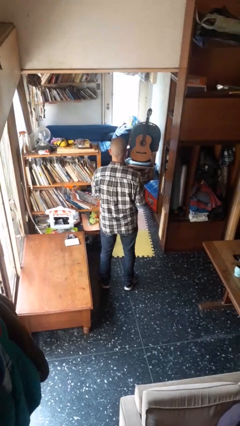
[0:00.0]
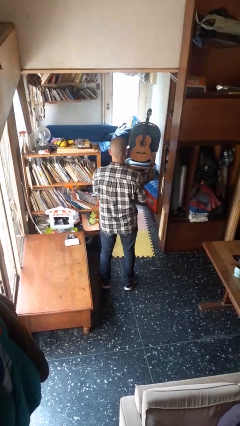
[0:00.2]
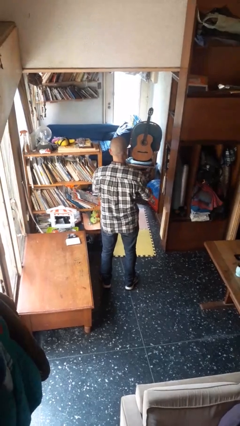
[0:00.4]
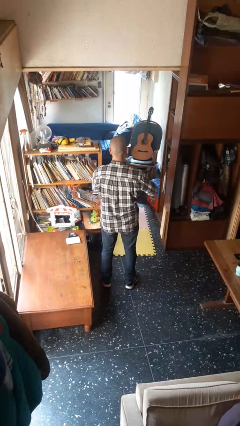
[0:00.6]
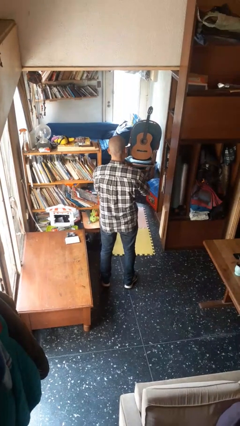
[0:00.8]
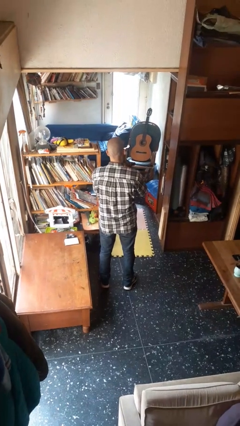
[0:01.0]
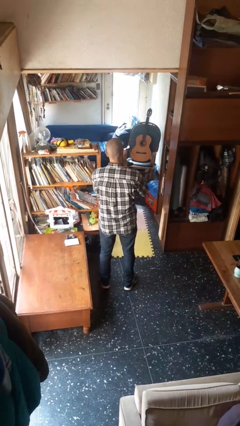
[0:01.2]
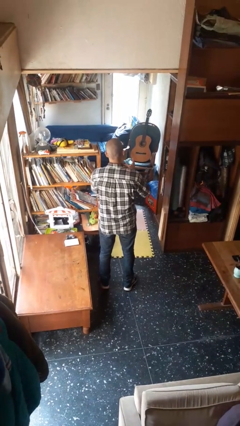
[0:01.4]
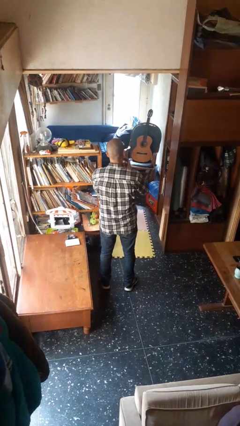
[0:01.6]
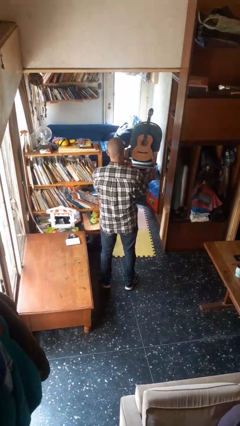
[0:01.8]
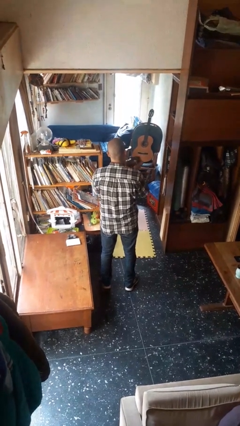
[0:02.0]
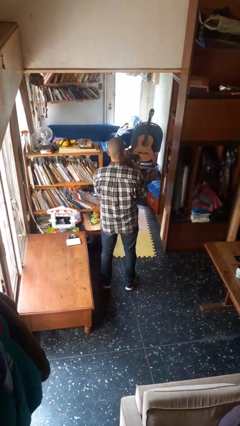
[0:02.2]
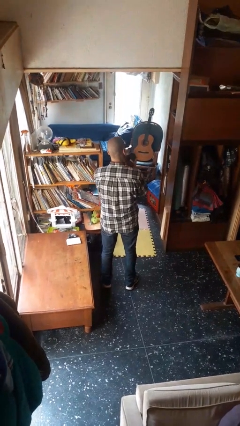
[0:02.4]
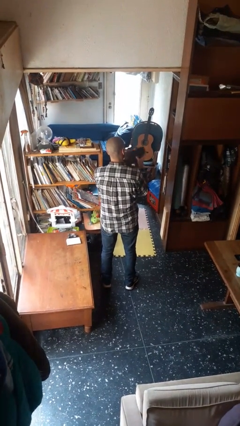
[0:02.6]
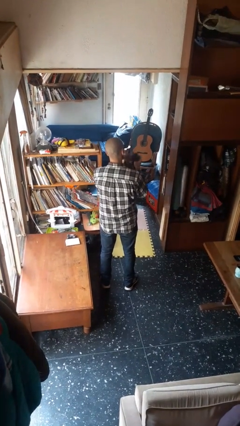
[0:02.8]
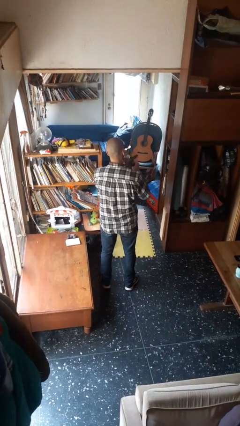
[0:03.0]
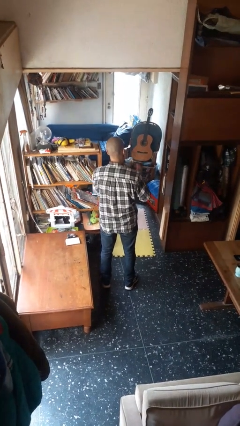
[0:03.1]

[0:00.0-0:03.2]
person squeezes object

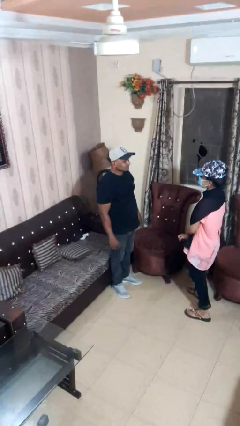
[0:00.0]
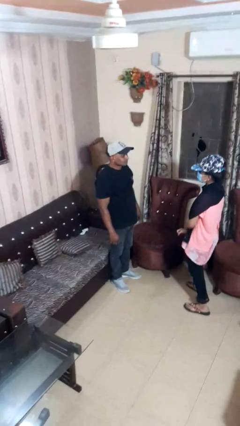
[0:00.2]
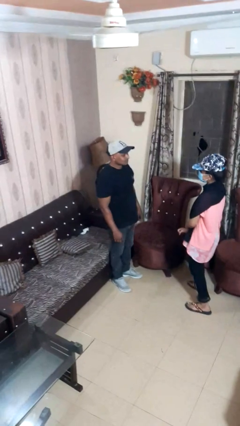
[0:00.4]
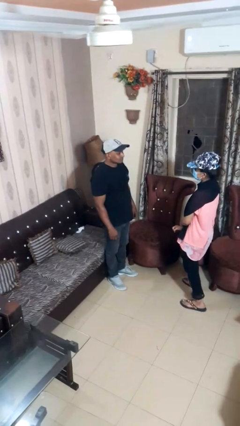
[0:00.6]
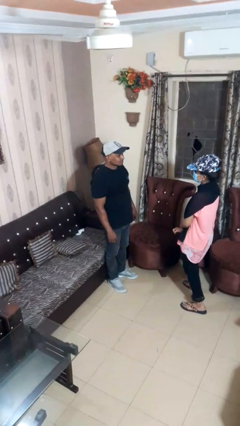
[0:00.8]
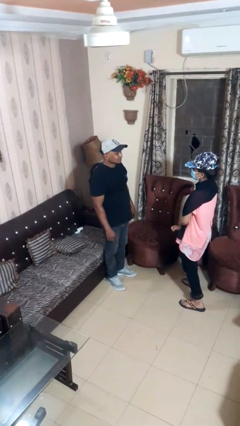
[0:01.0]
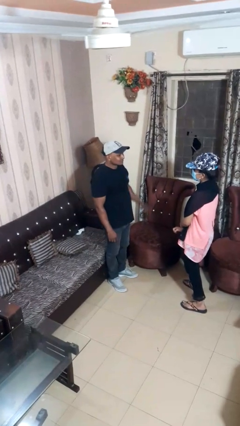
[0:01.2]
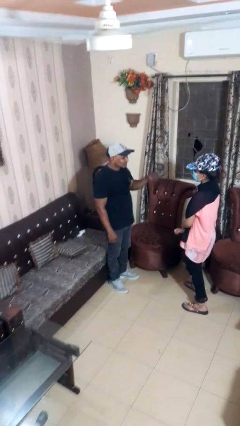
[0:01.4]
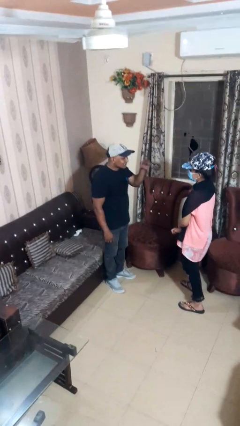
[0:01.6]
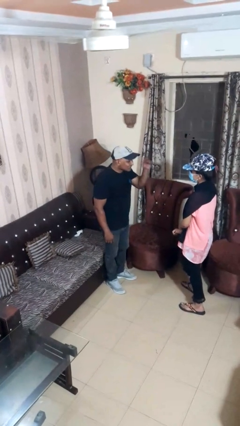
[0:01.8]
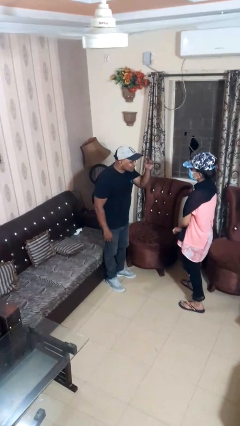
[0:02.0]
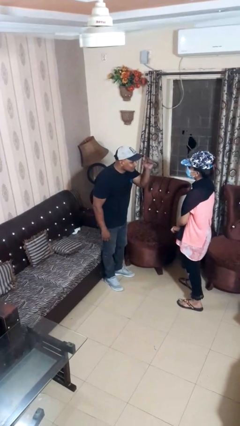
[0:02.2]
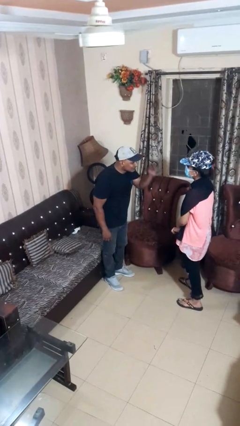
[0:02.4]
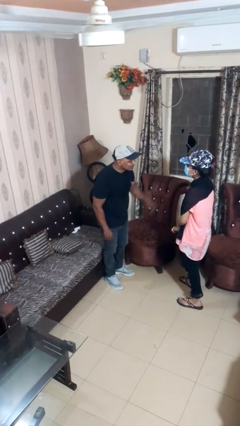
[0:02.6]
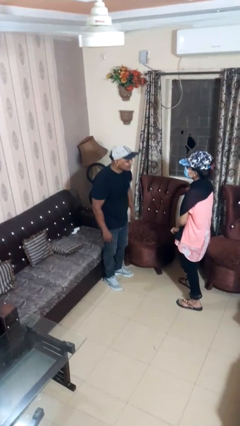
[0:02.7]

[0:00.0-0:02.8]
person points at person

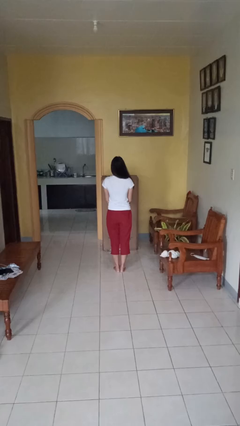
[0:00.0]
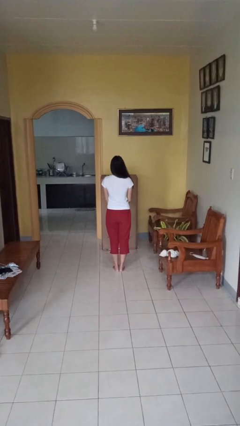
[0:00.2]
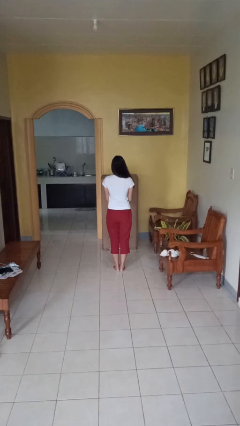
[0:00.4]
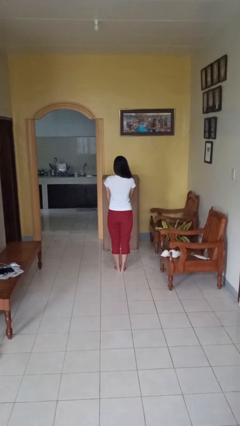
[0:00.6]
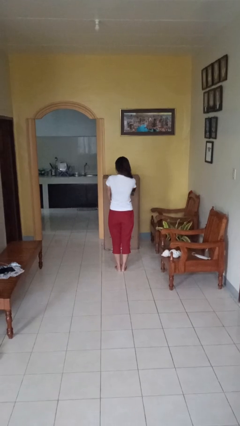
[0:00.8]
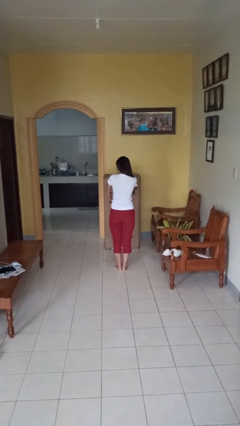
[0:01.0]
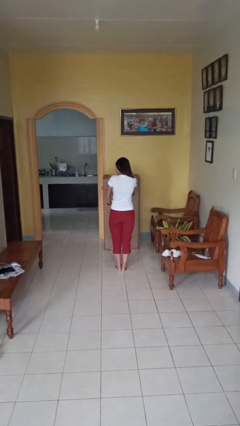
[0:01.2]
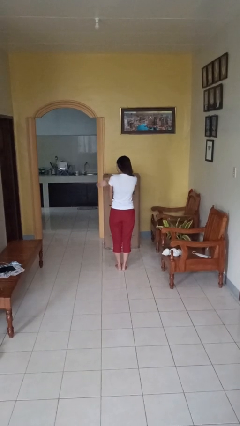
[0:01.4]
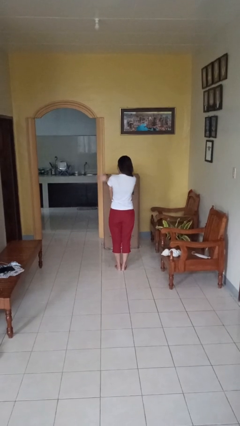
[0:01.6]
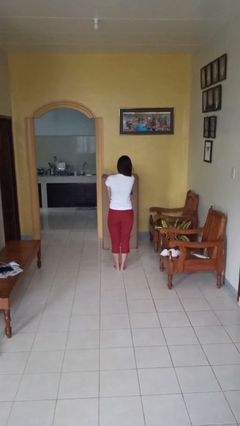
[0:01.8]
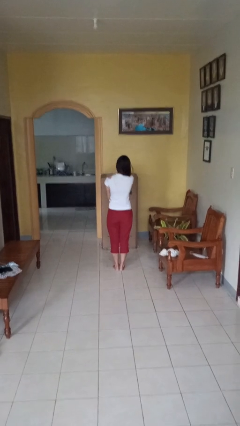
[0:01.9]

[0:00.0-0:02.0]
person swats bug

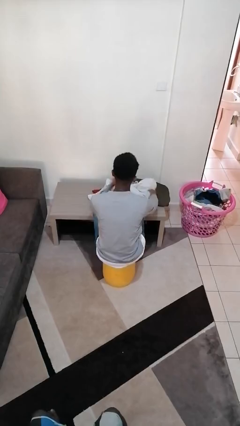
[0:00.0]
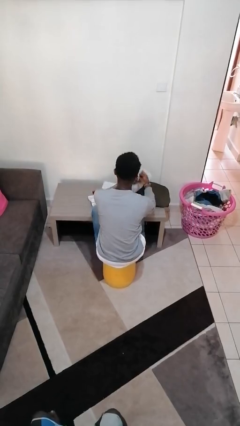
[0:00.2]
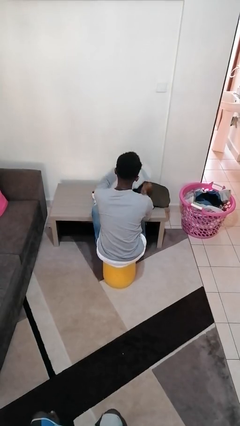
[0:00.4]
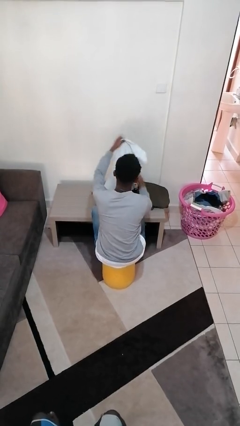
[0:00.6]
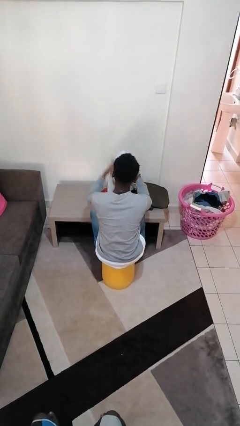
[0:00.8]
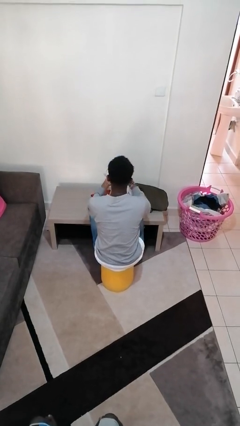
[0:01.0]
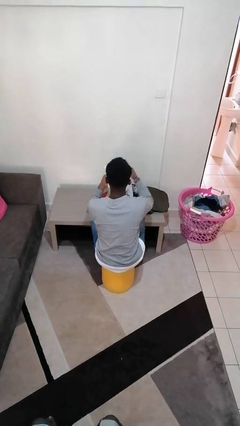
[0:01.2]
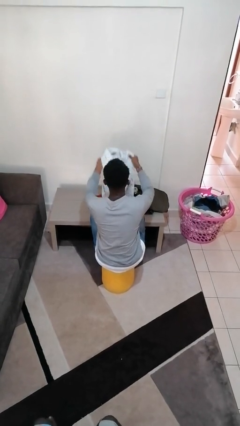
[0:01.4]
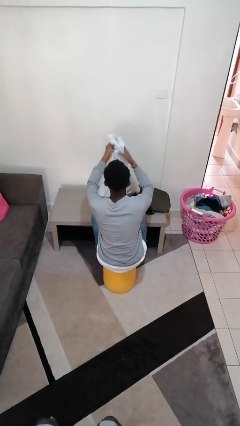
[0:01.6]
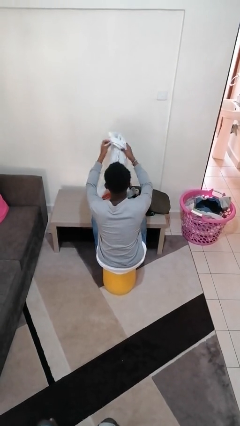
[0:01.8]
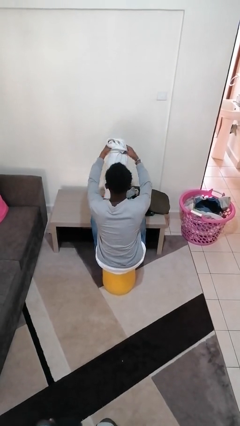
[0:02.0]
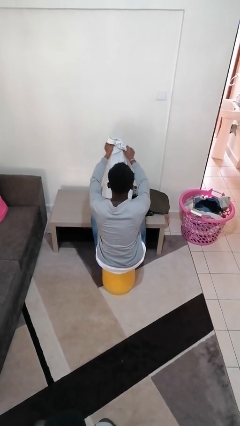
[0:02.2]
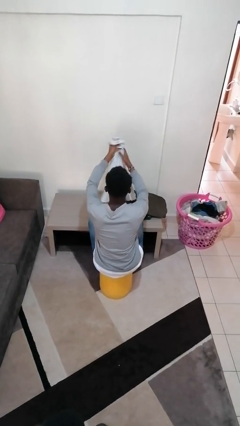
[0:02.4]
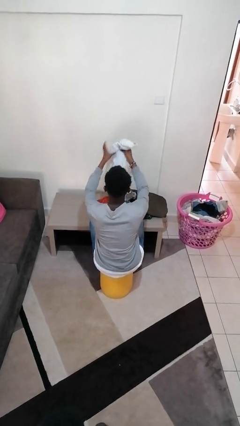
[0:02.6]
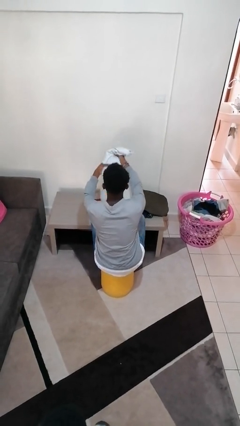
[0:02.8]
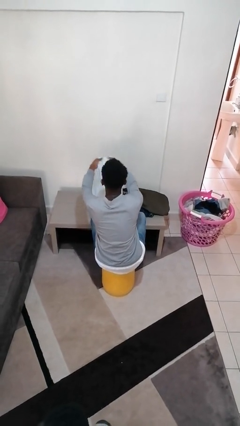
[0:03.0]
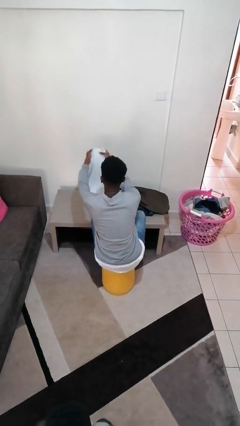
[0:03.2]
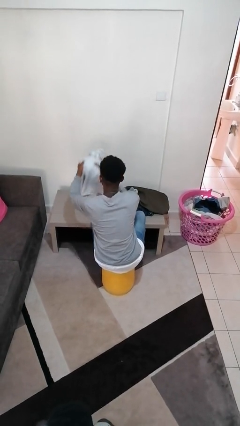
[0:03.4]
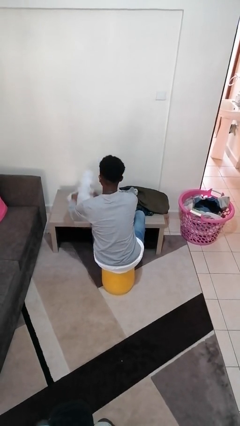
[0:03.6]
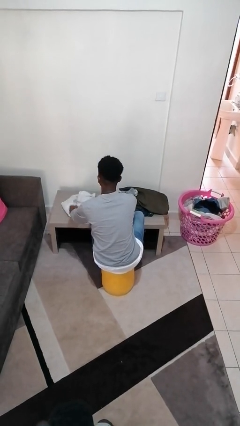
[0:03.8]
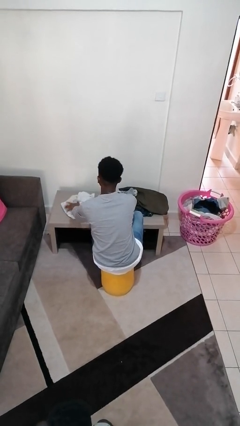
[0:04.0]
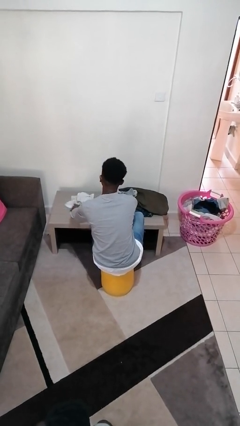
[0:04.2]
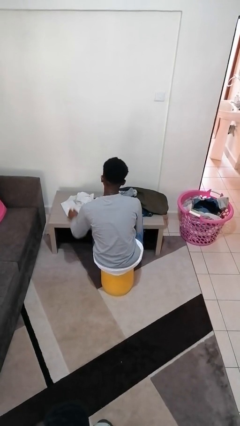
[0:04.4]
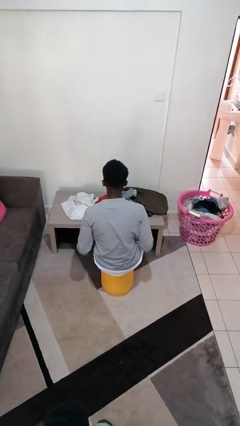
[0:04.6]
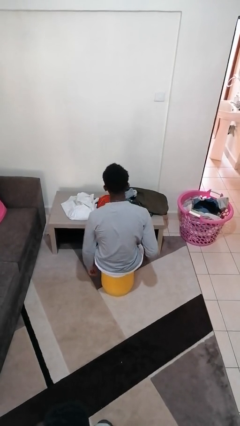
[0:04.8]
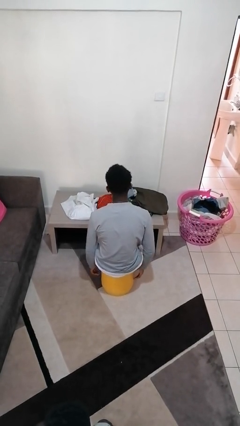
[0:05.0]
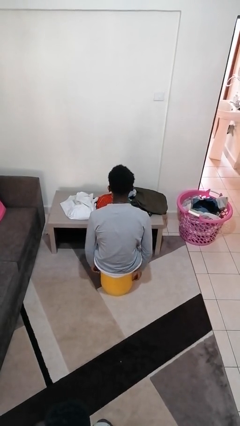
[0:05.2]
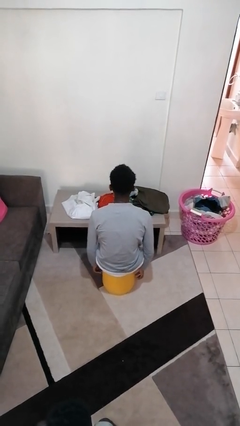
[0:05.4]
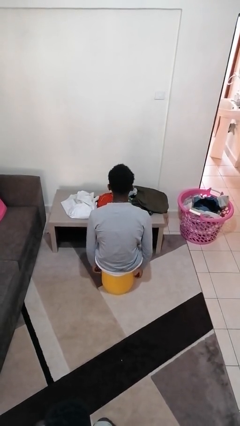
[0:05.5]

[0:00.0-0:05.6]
person folds shirt

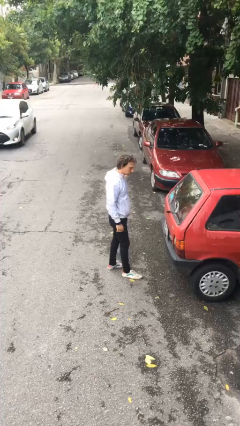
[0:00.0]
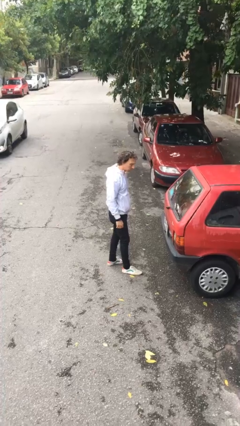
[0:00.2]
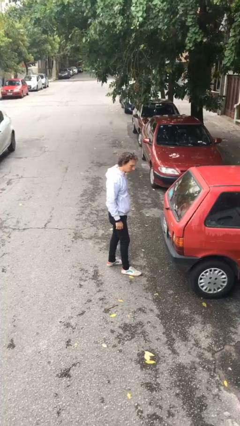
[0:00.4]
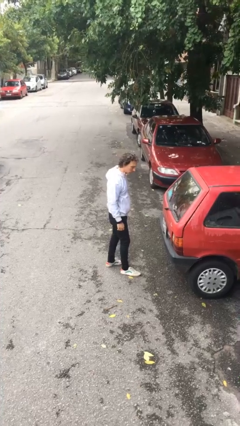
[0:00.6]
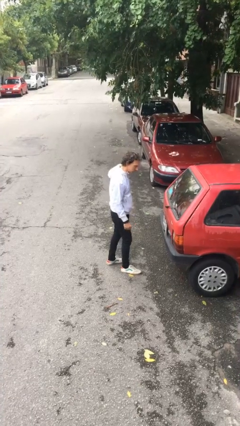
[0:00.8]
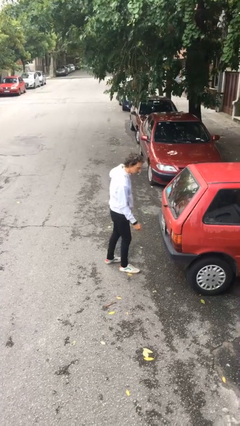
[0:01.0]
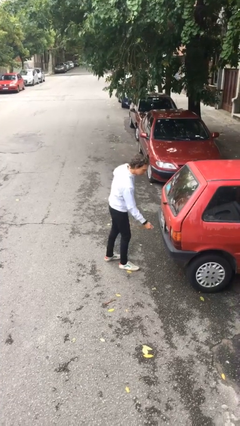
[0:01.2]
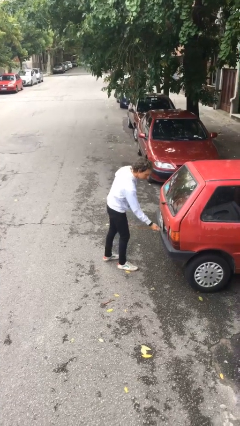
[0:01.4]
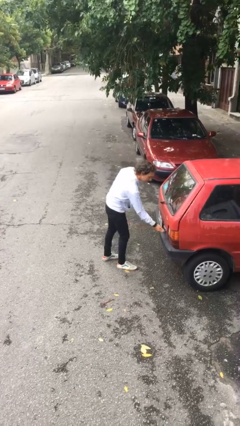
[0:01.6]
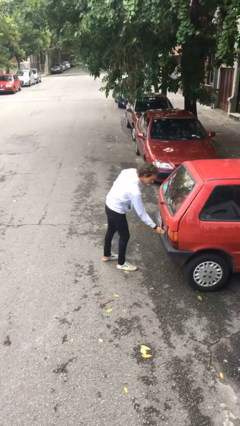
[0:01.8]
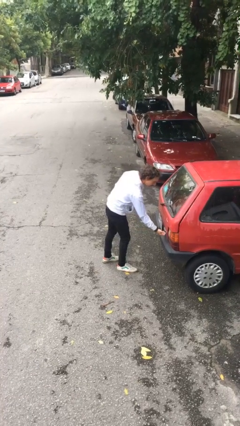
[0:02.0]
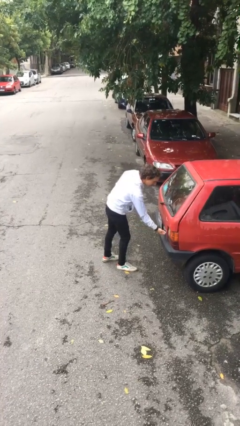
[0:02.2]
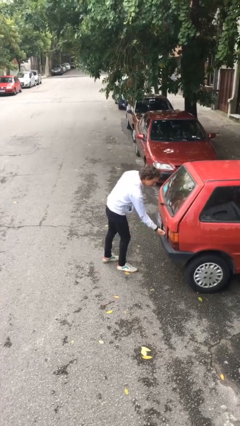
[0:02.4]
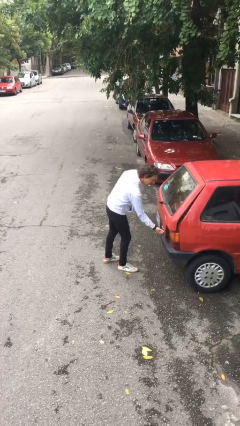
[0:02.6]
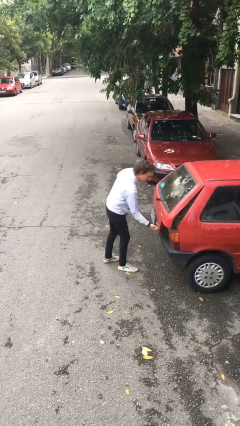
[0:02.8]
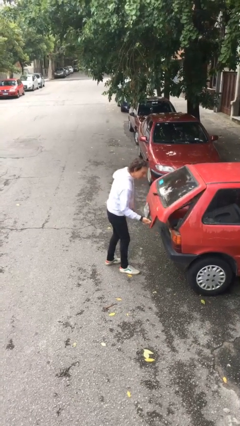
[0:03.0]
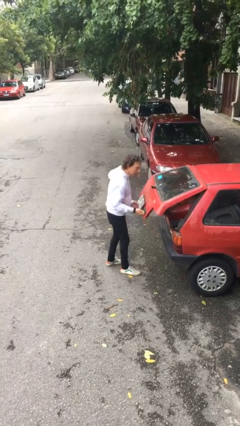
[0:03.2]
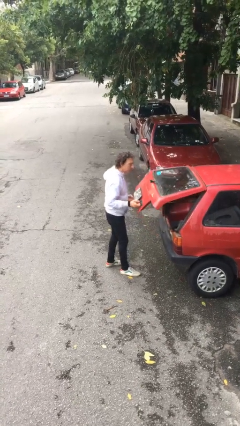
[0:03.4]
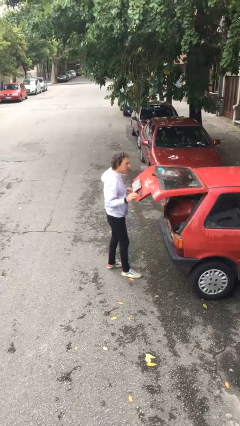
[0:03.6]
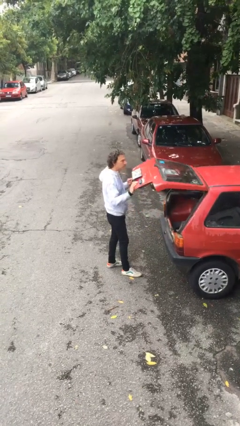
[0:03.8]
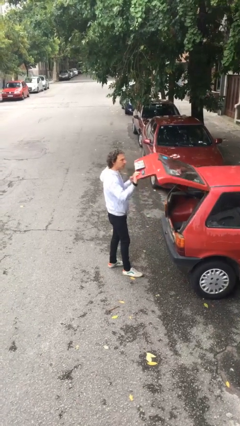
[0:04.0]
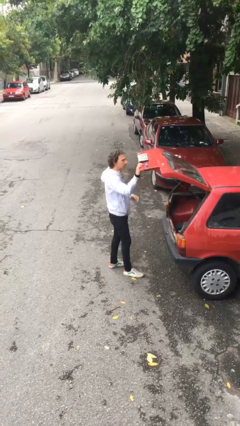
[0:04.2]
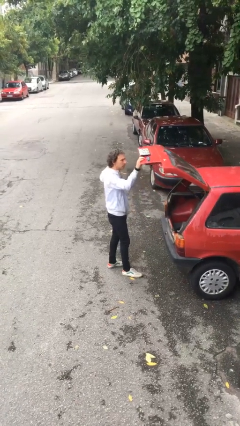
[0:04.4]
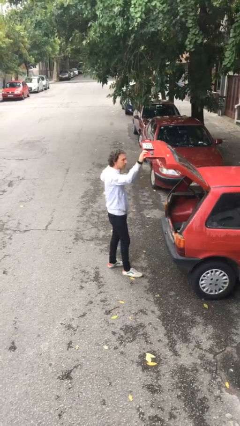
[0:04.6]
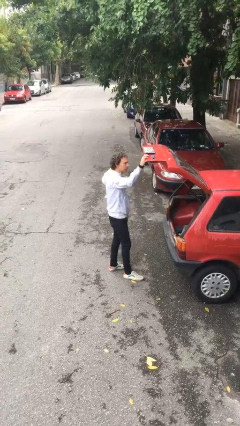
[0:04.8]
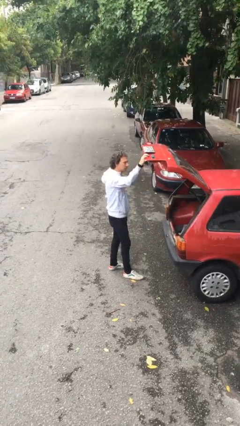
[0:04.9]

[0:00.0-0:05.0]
person opens car trunk
